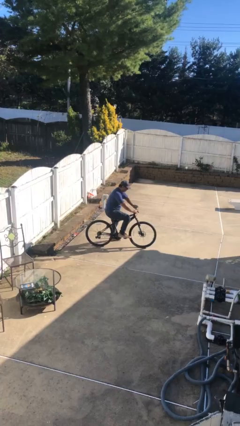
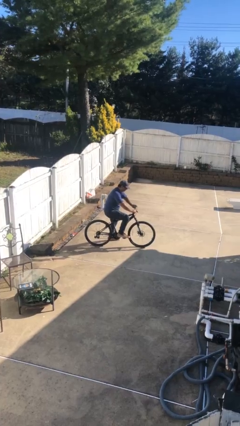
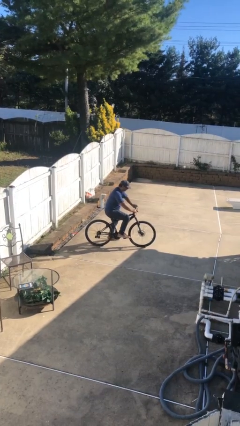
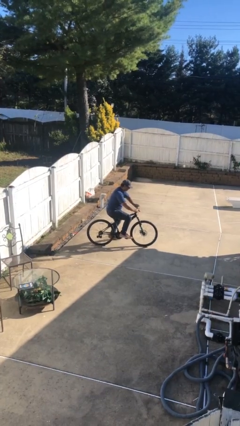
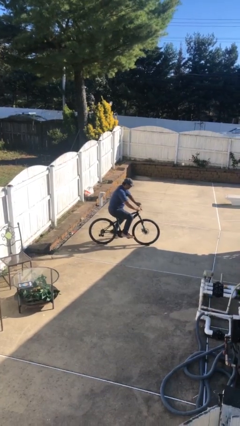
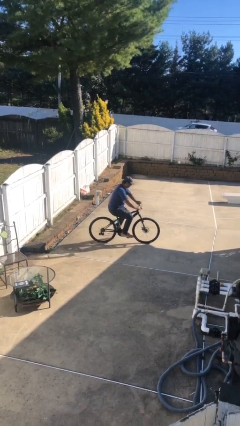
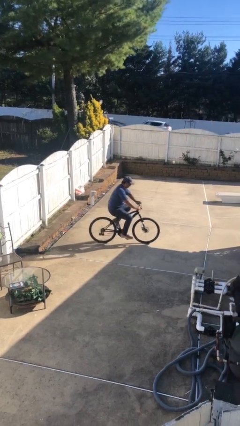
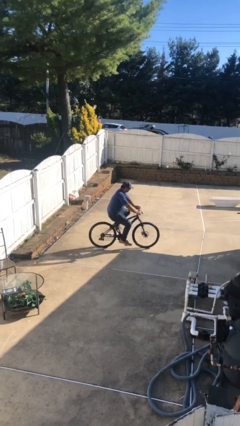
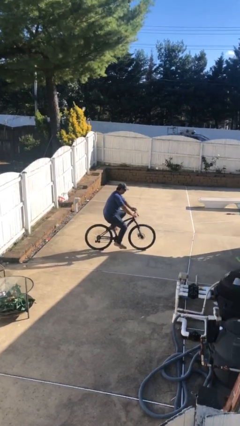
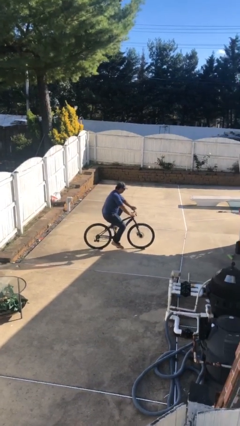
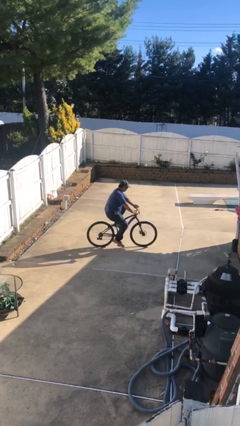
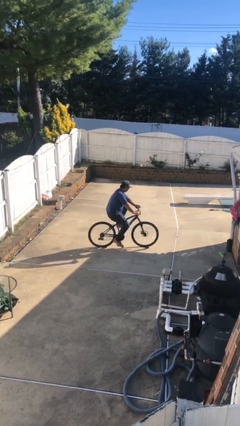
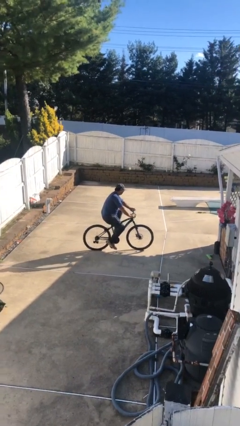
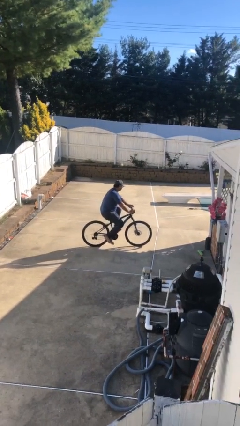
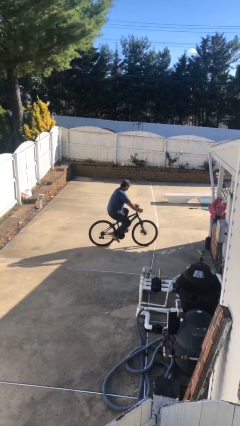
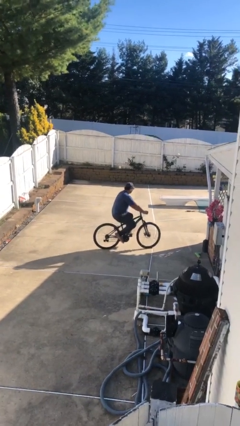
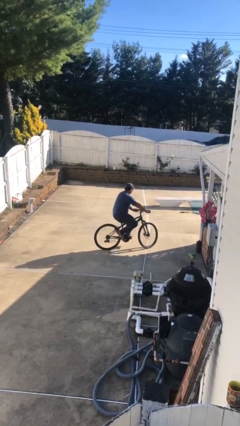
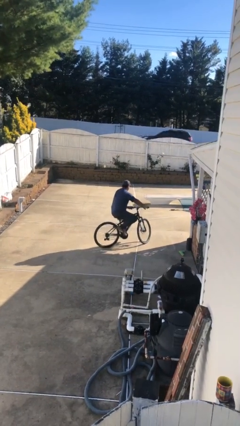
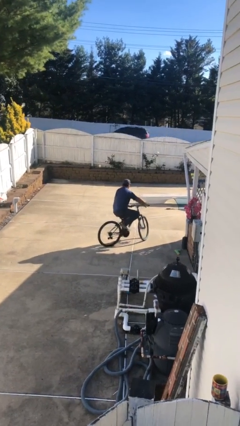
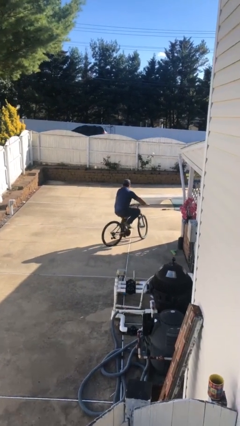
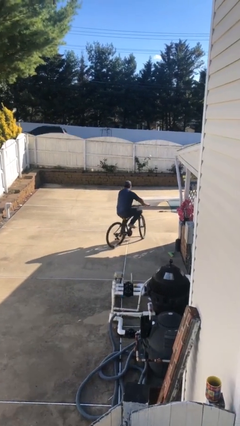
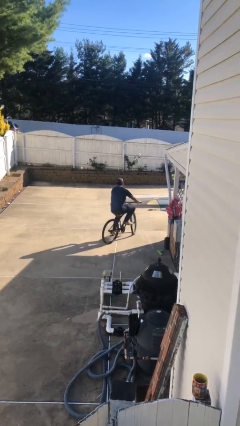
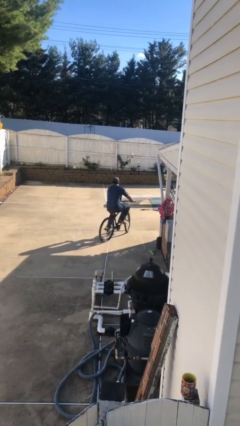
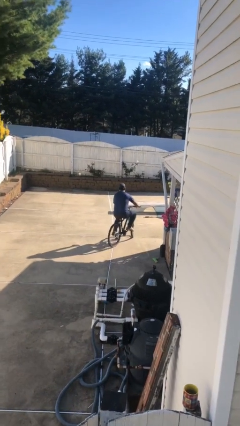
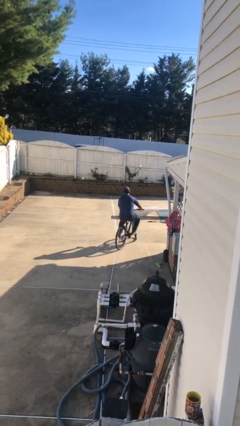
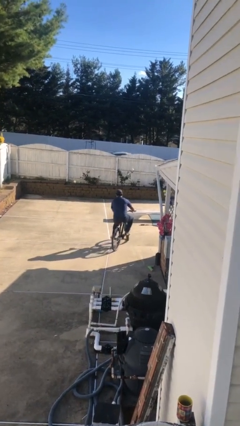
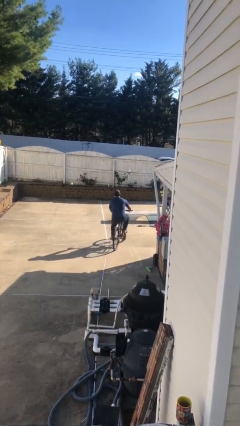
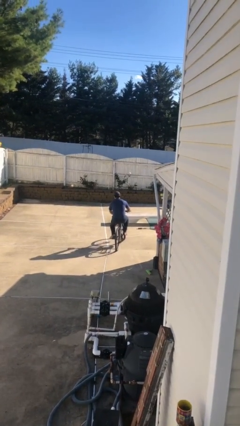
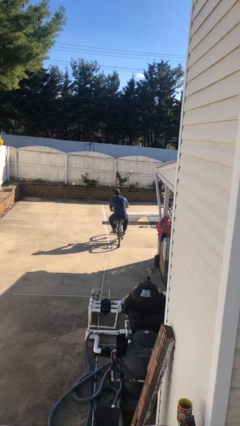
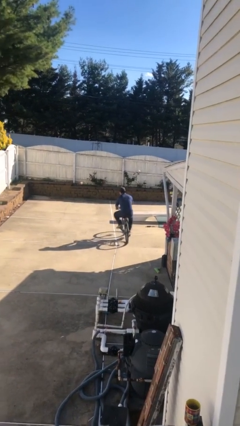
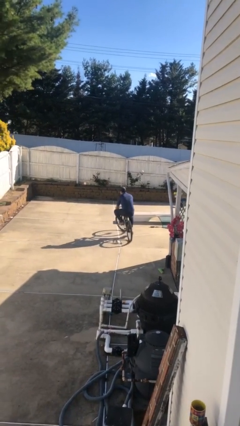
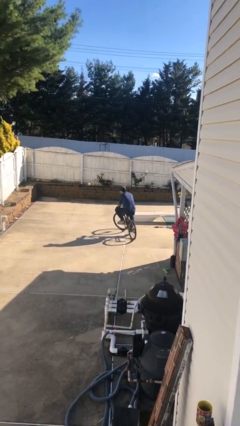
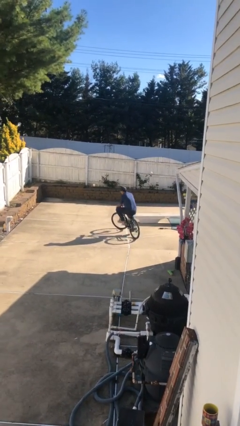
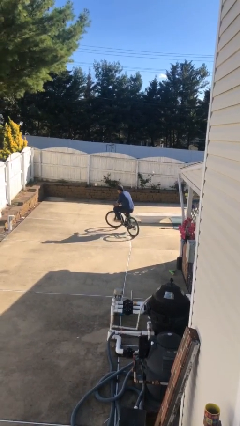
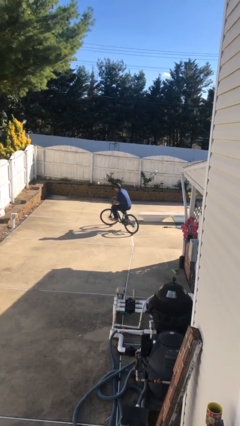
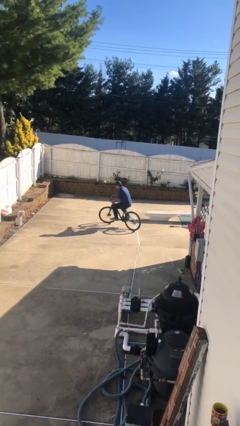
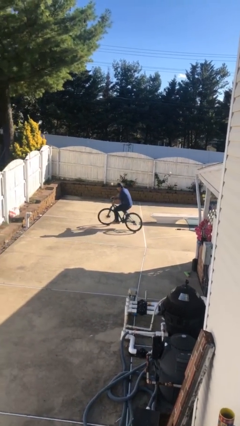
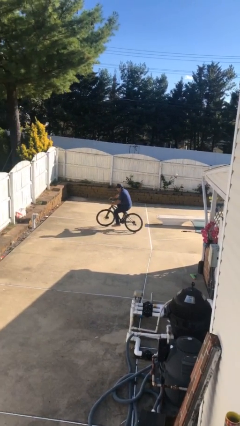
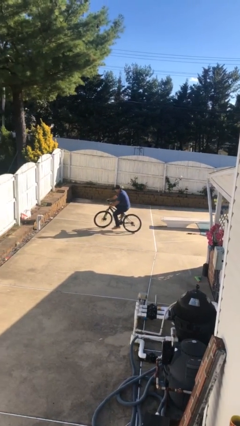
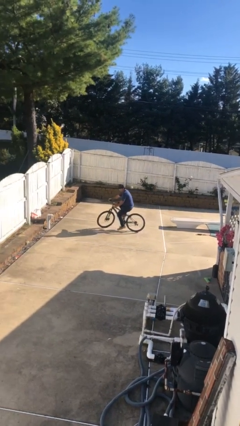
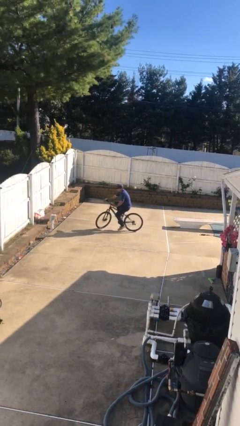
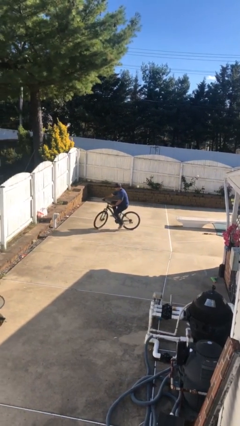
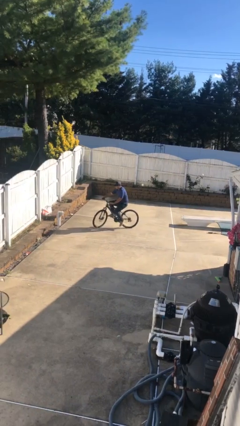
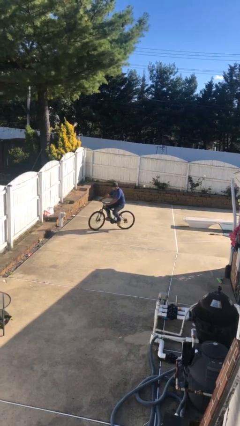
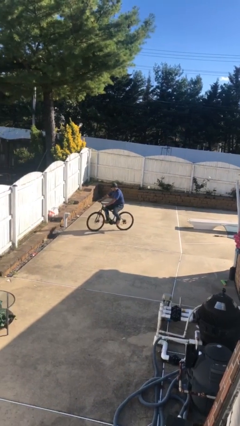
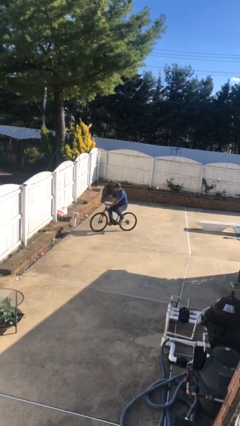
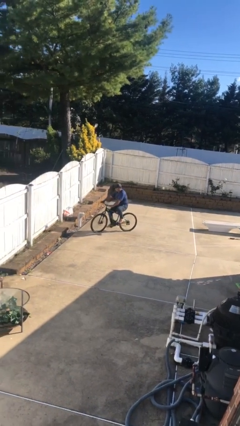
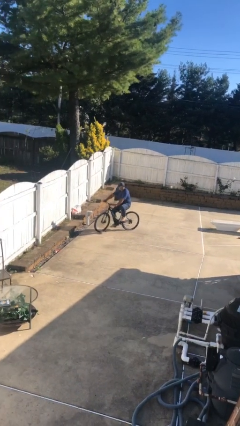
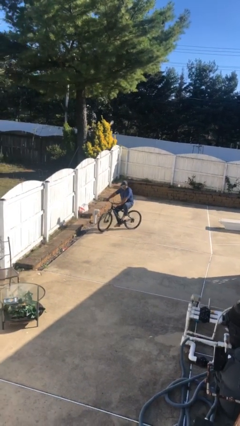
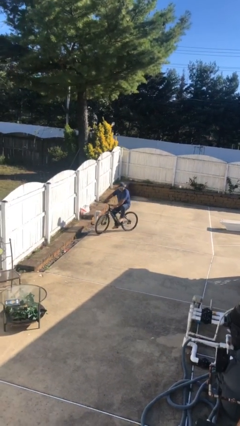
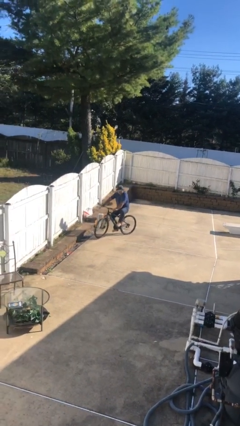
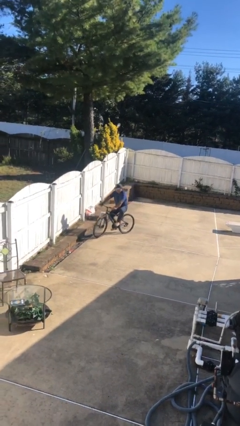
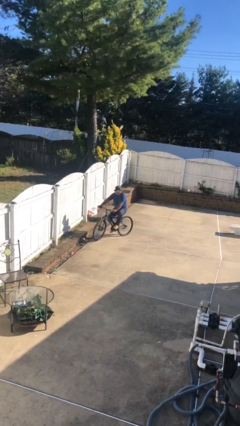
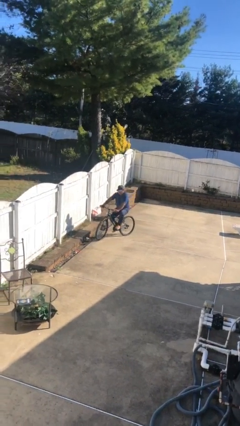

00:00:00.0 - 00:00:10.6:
person rides bicycle

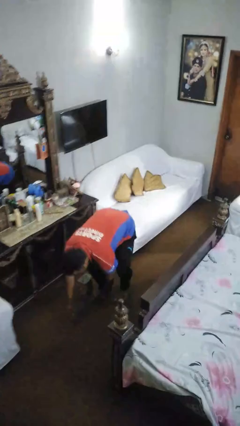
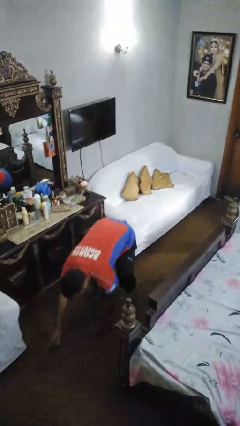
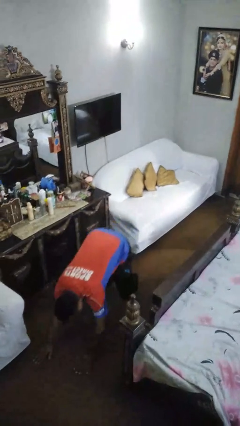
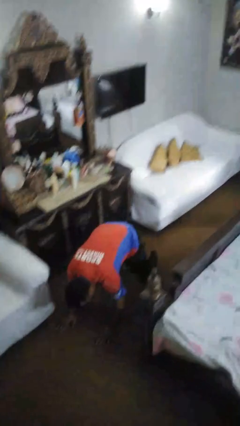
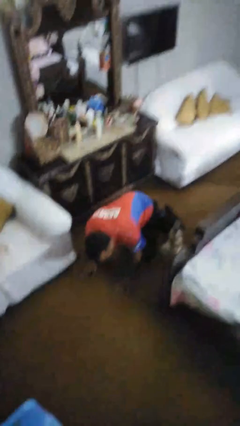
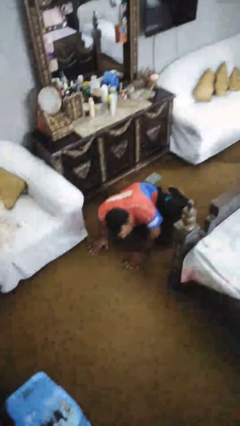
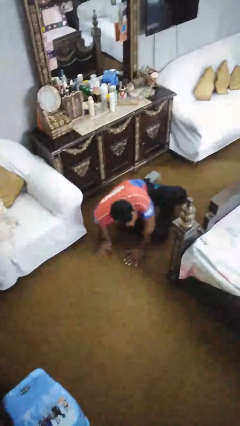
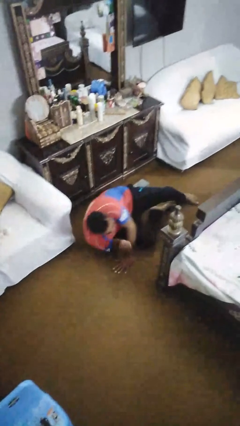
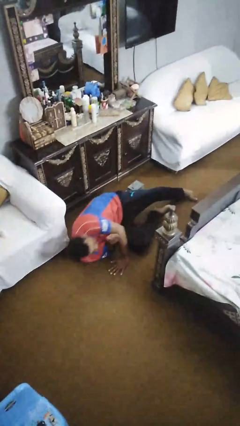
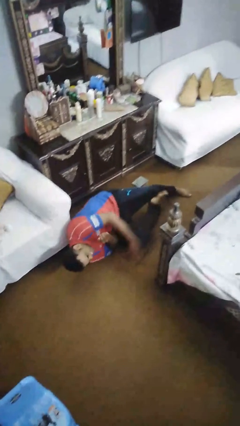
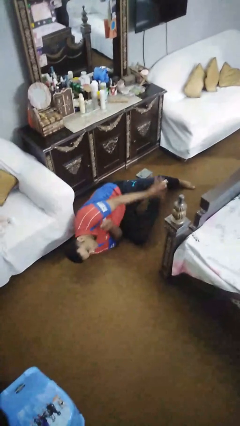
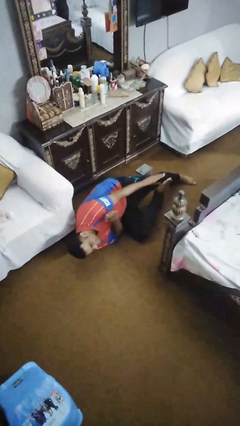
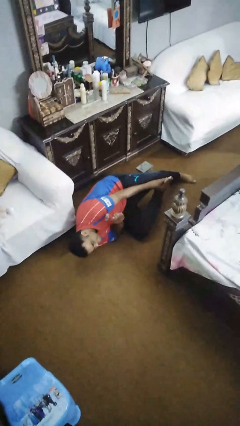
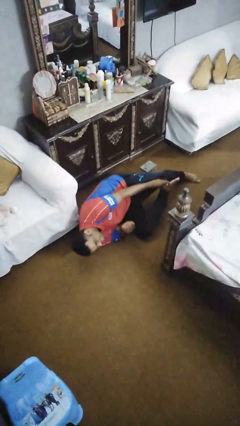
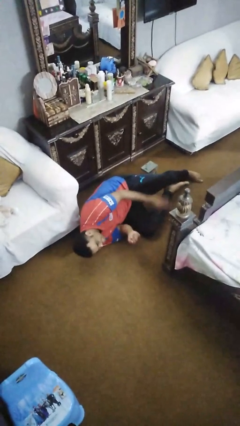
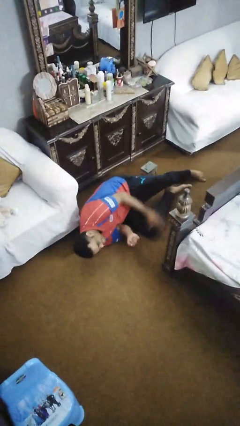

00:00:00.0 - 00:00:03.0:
person lies down on floor

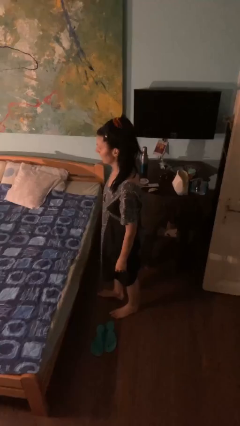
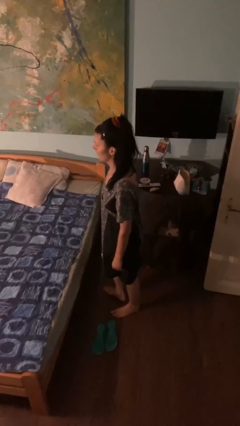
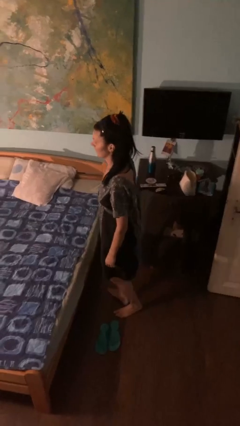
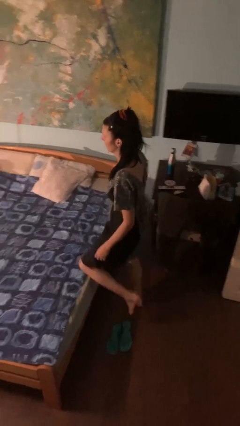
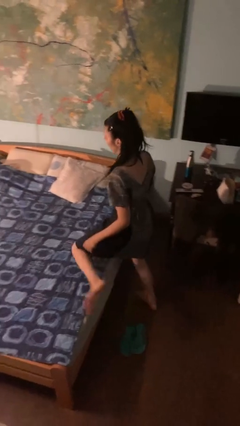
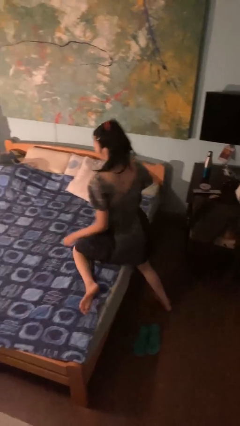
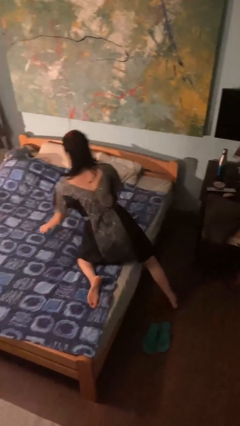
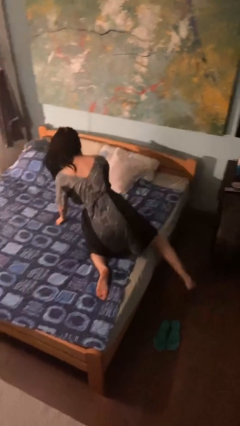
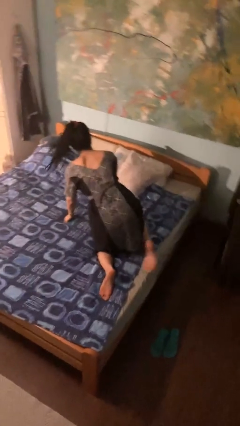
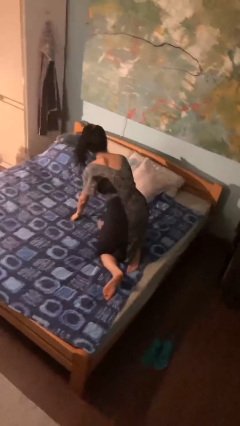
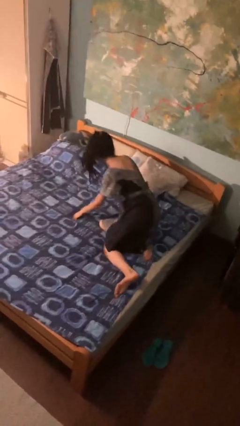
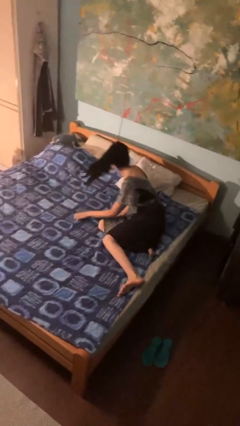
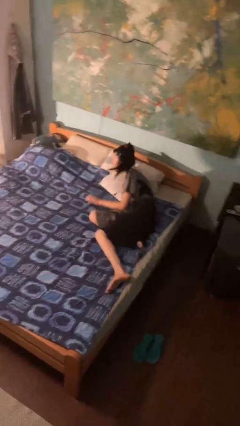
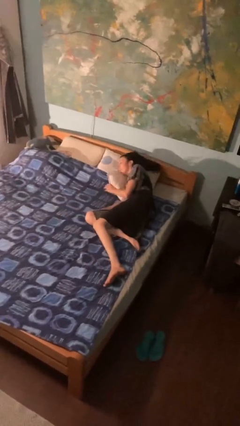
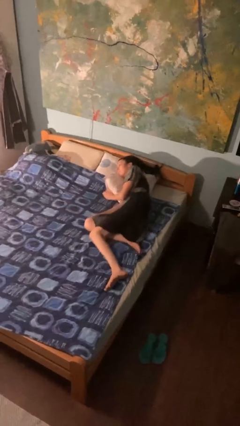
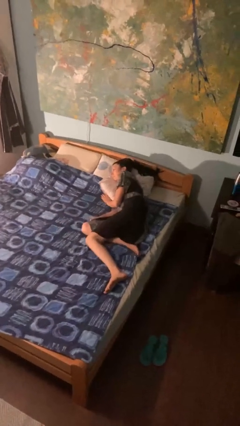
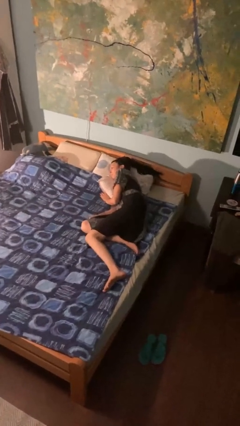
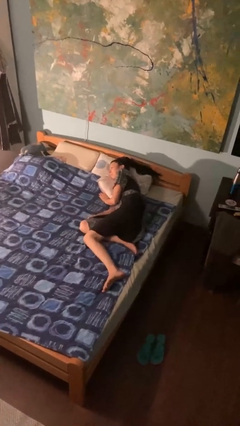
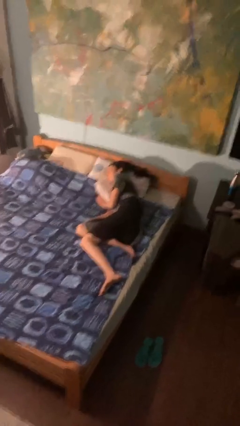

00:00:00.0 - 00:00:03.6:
person lies down on bed

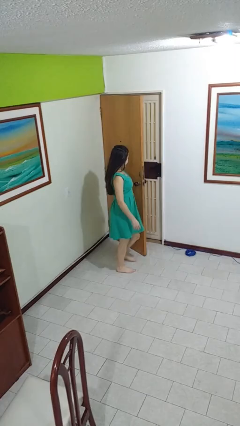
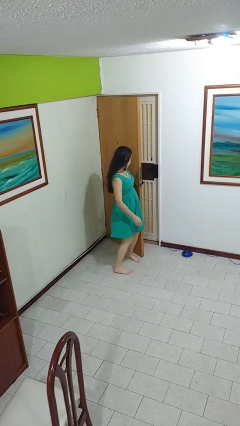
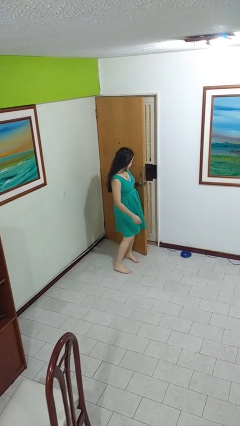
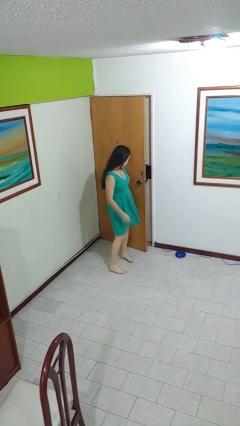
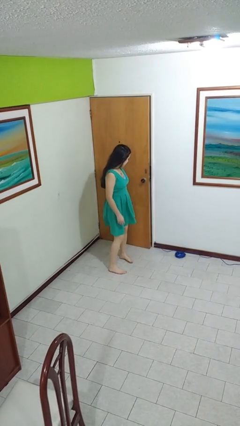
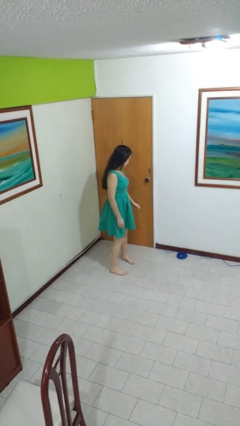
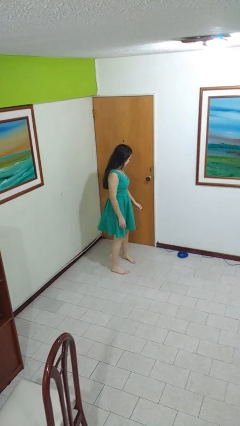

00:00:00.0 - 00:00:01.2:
person closes door with hip
